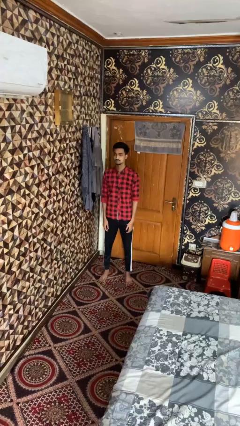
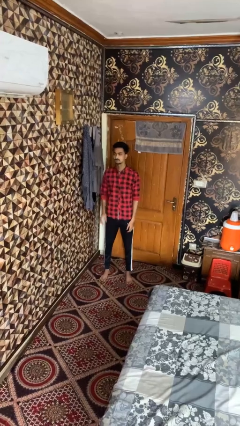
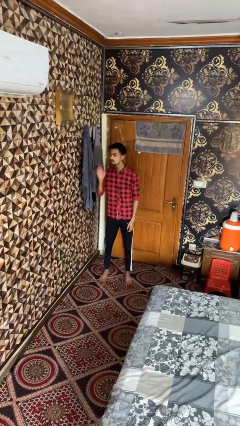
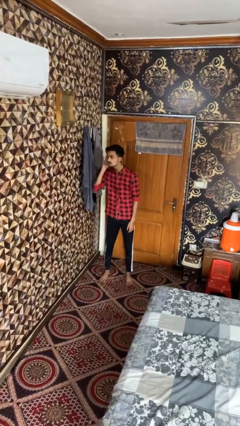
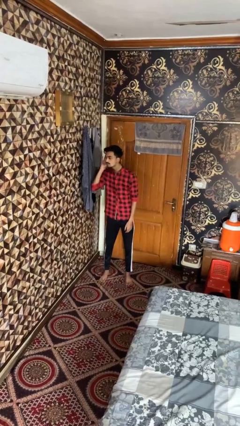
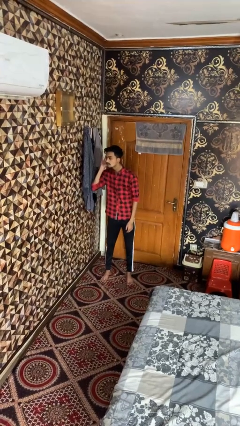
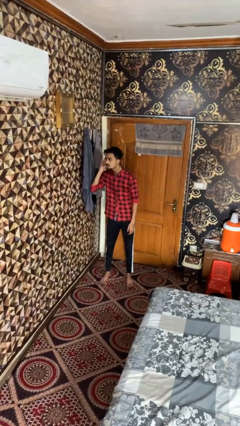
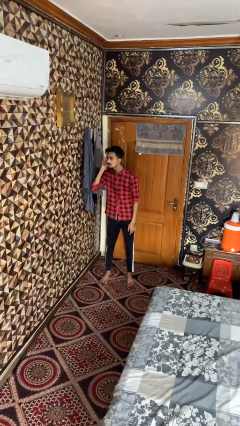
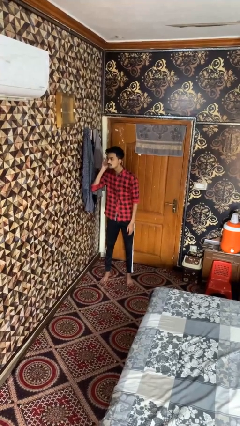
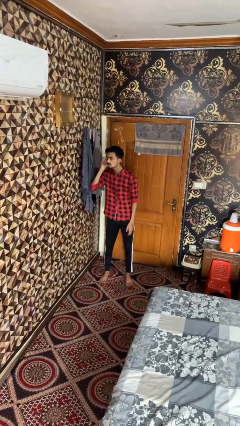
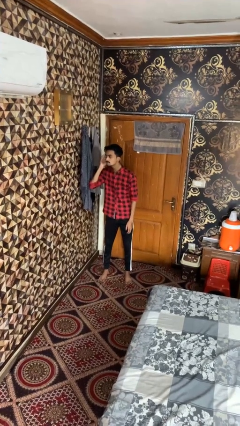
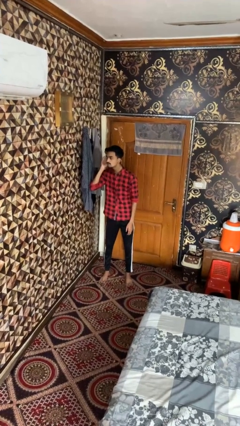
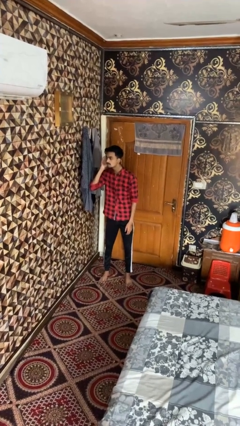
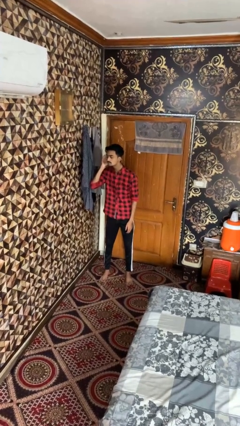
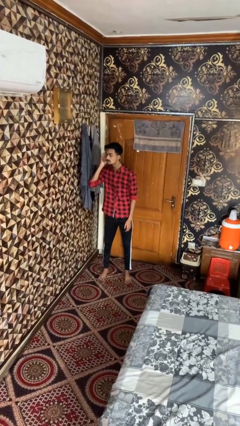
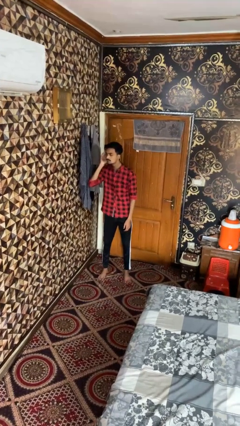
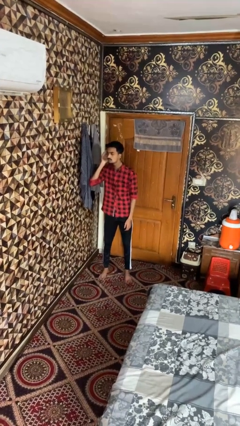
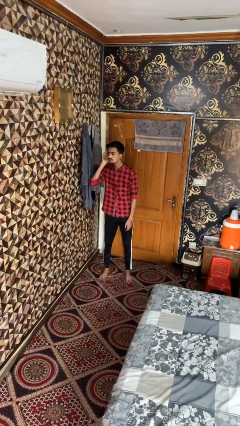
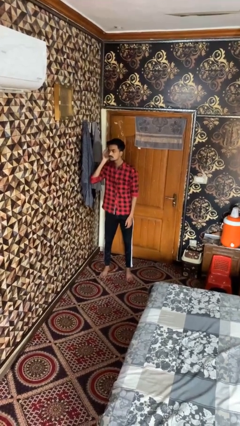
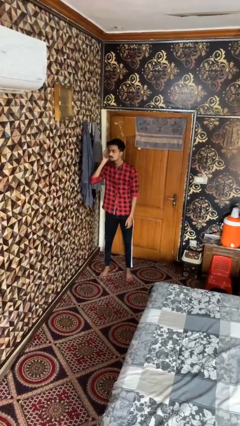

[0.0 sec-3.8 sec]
person gestures listen closely

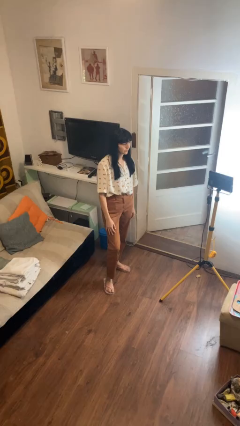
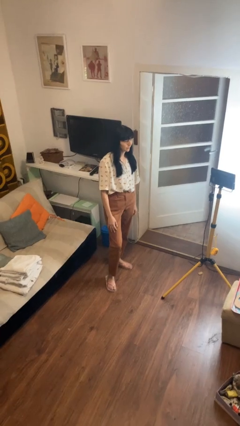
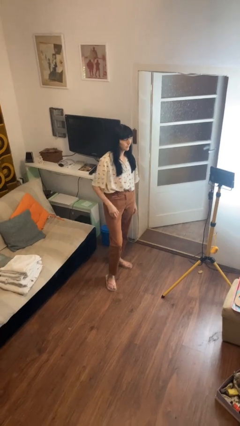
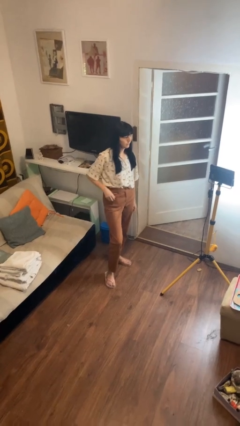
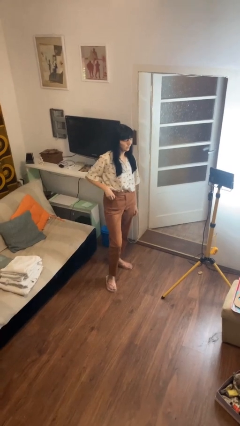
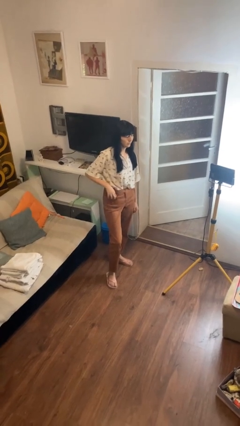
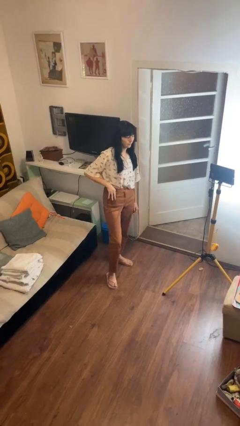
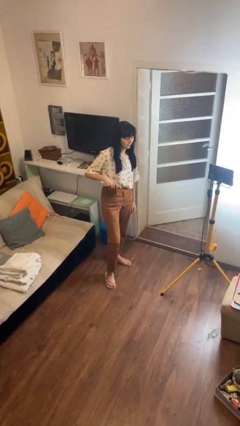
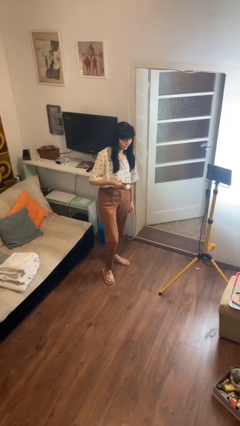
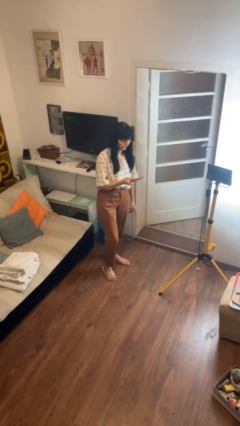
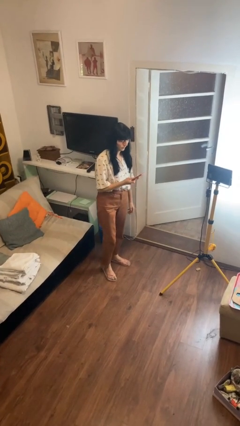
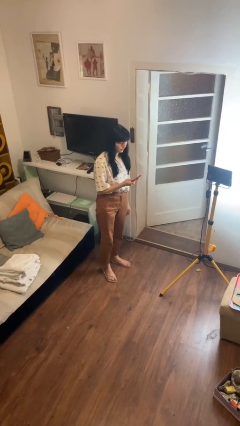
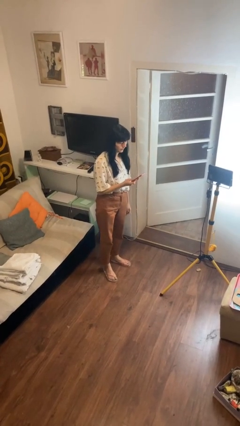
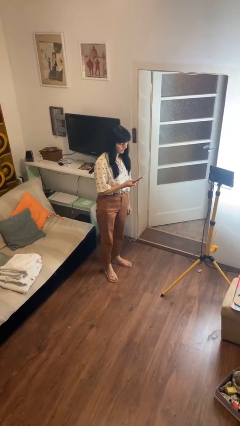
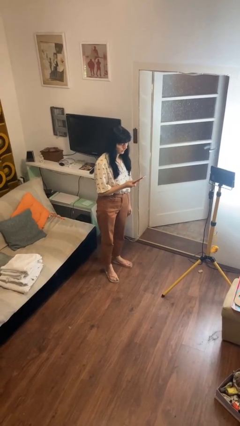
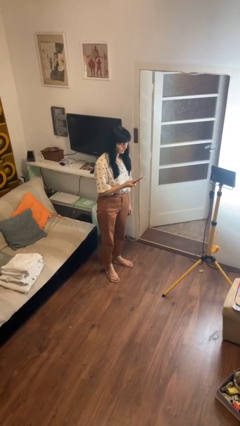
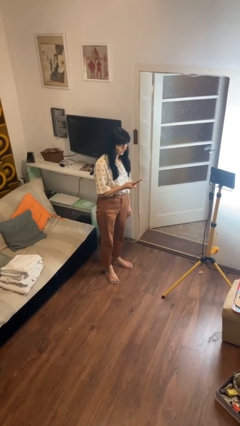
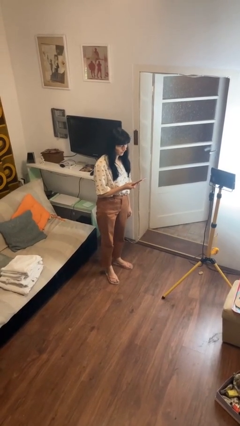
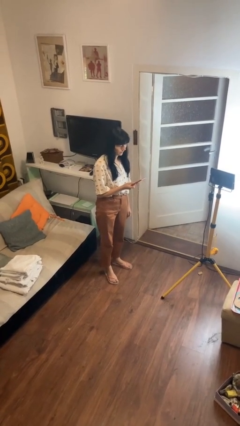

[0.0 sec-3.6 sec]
person takes phone from pocket

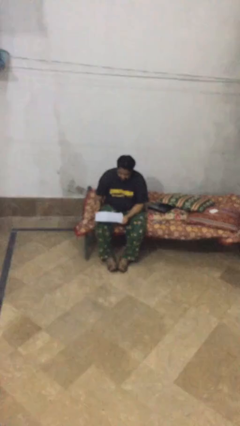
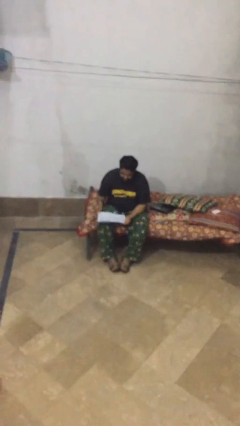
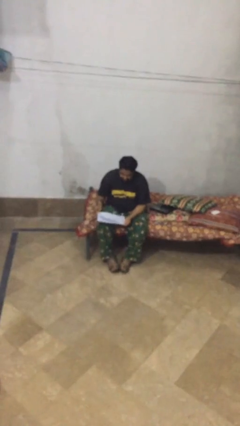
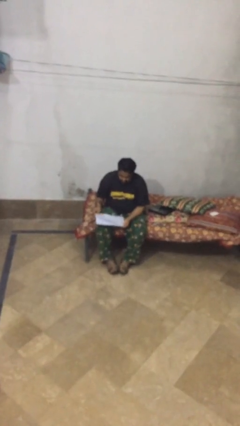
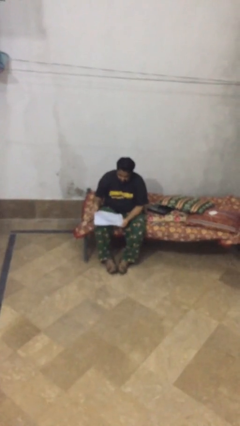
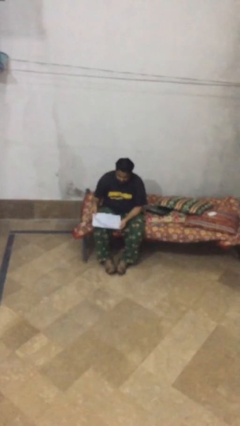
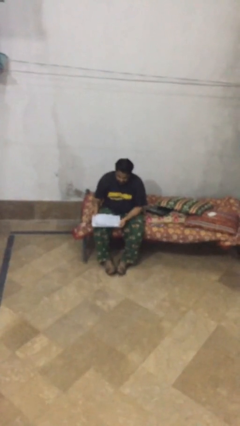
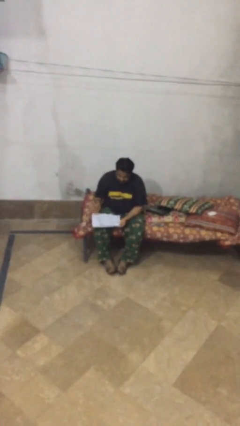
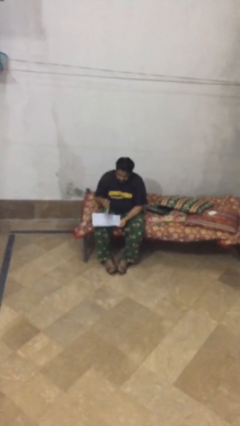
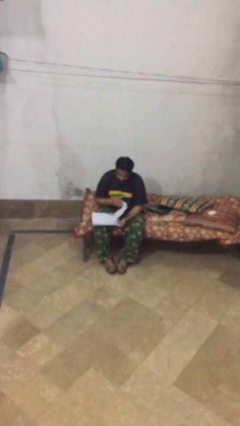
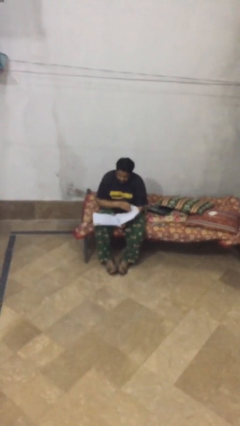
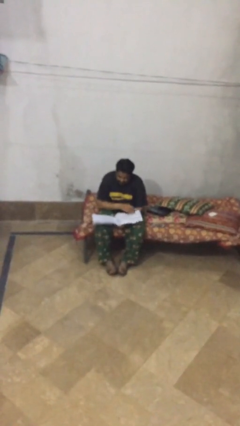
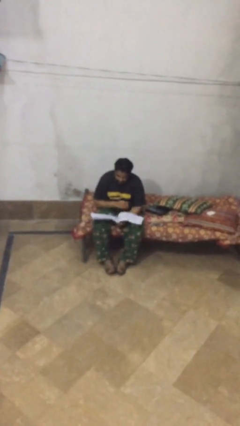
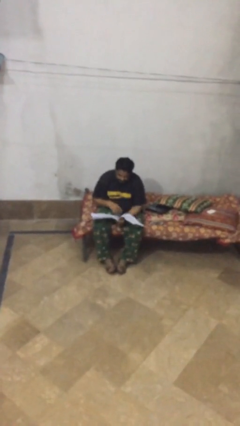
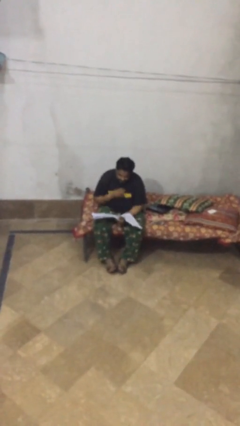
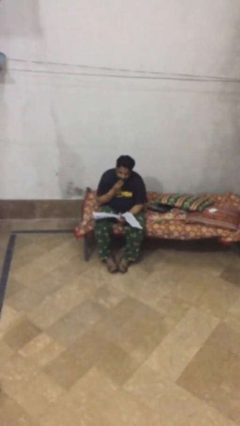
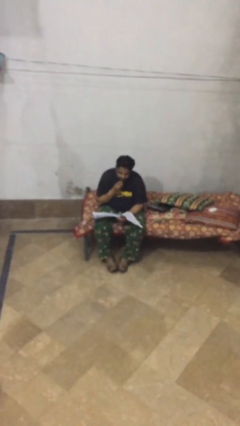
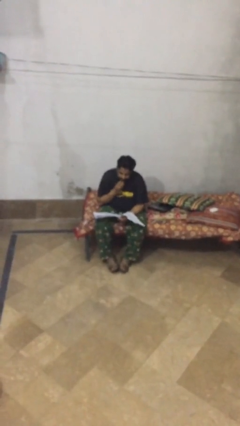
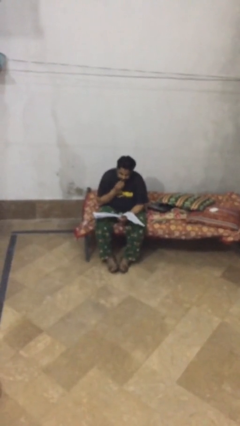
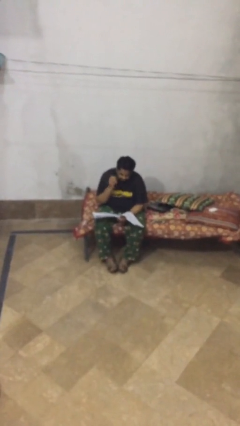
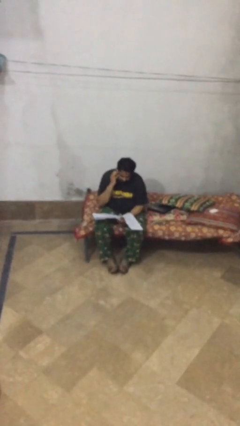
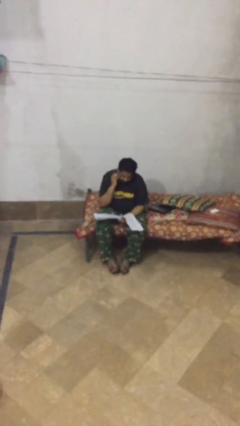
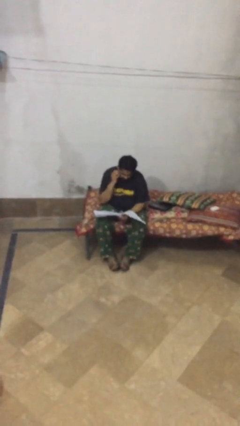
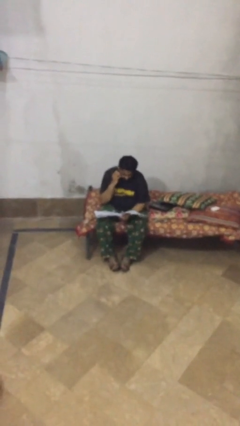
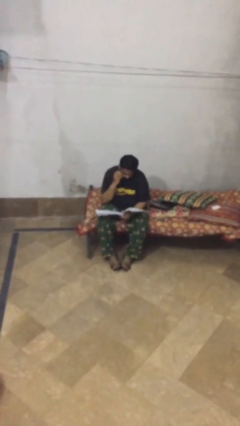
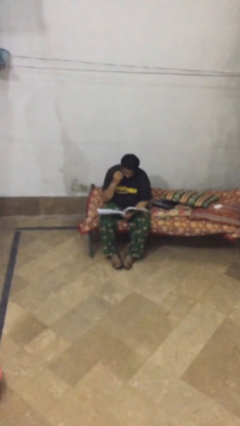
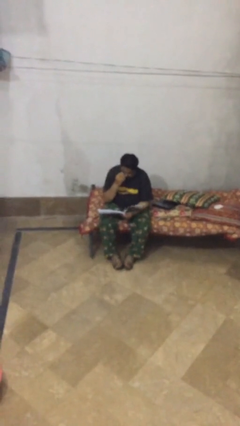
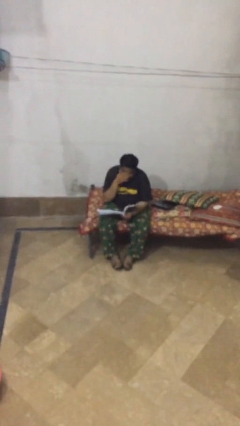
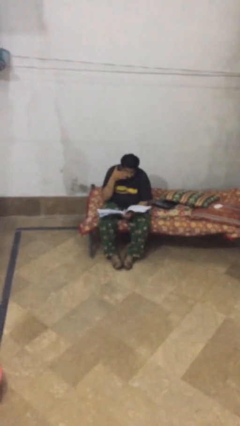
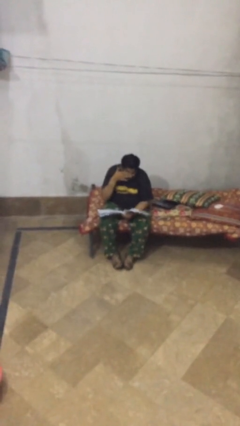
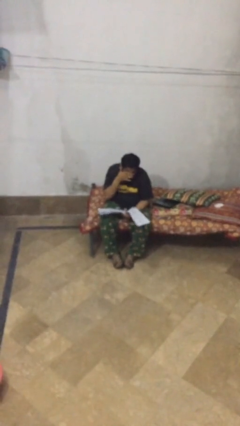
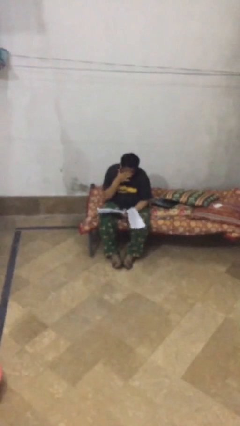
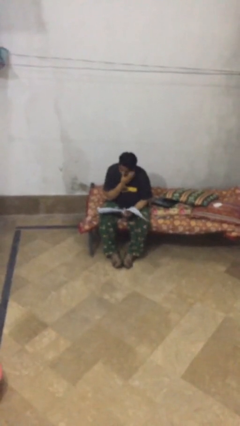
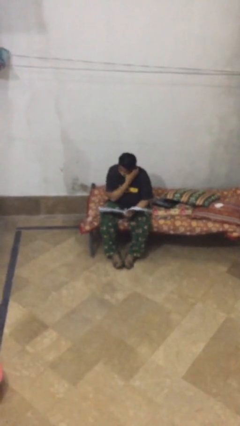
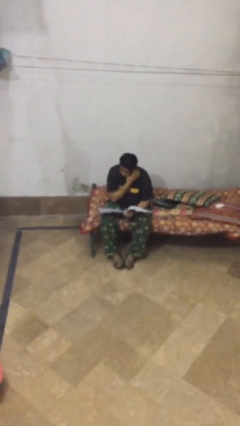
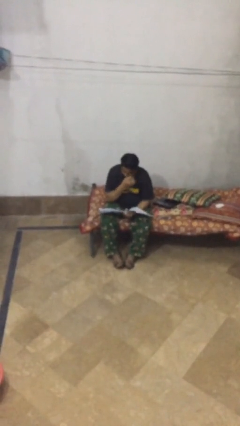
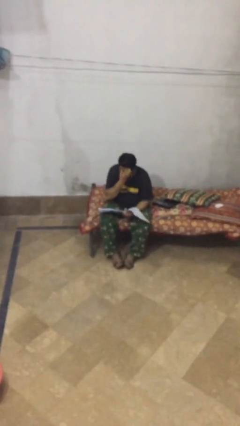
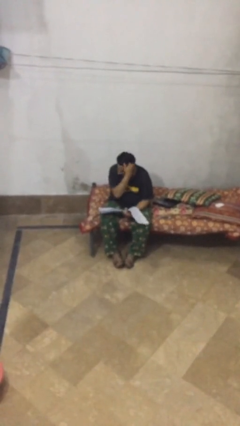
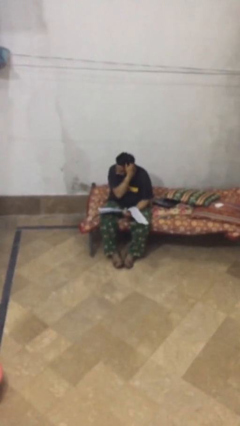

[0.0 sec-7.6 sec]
person reads document

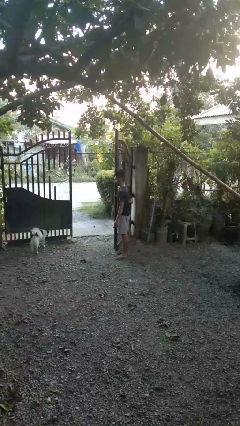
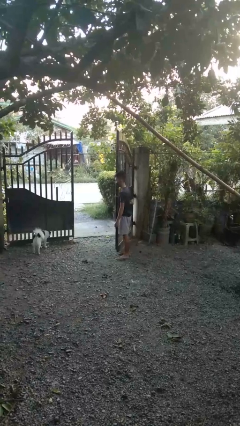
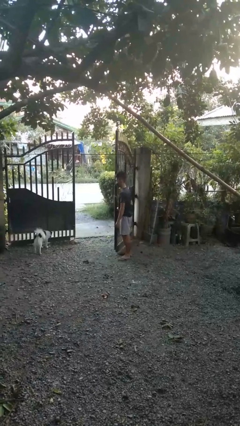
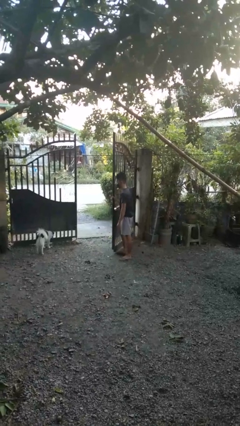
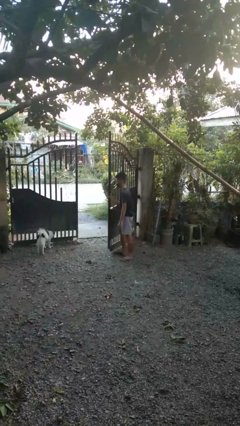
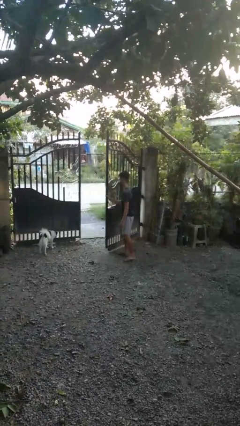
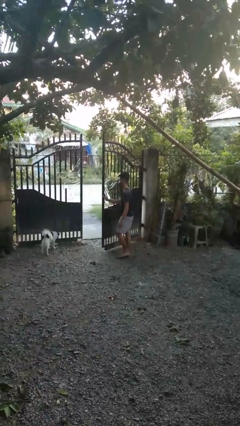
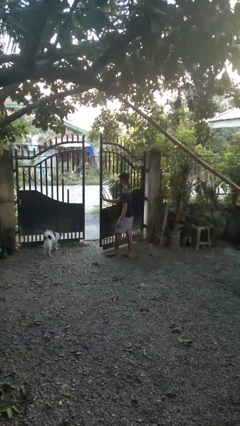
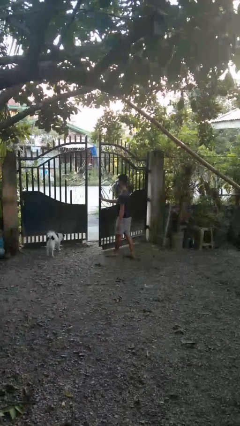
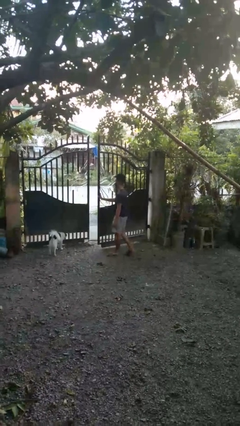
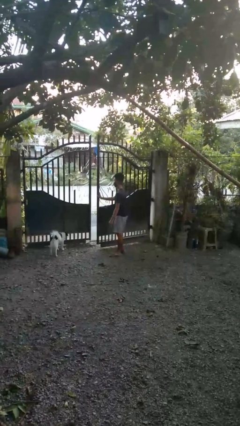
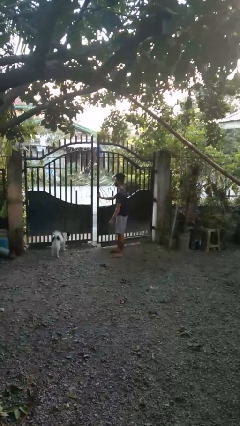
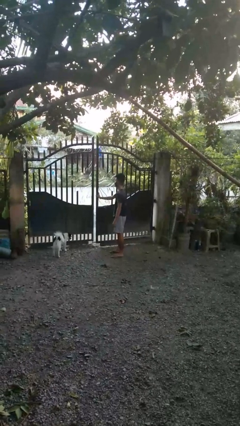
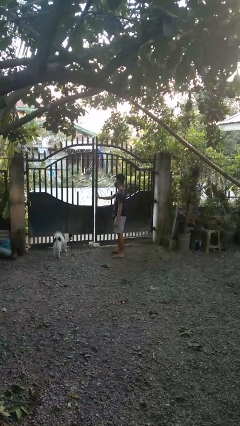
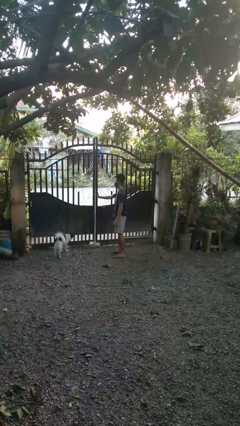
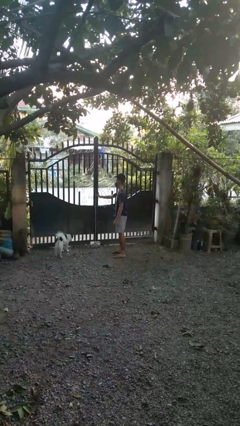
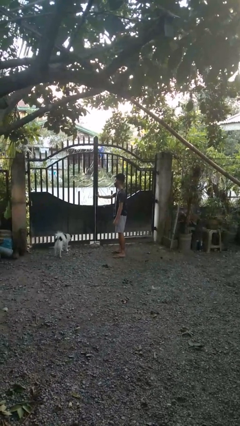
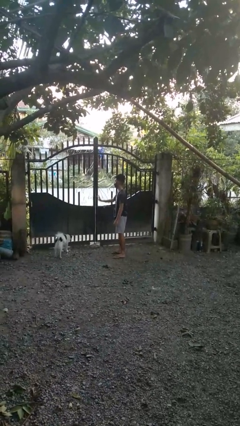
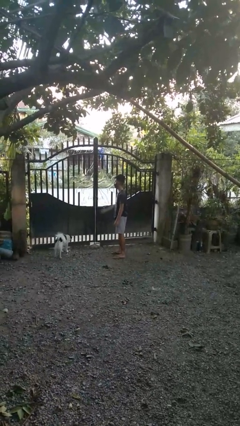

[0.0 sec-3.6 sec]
person closes gate
